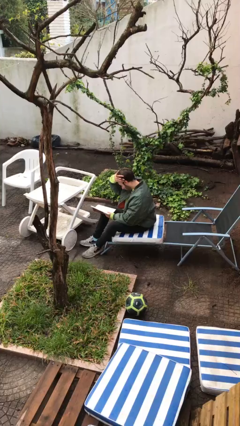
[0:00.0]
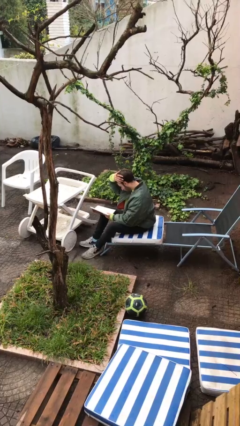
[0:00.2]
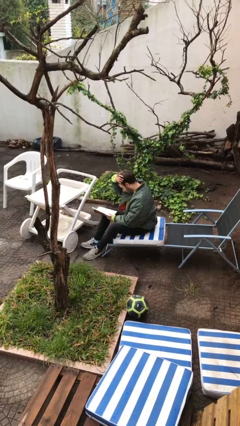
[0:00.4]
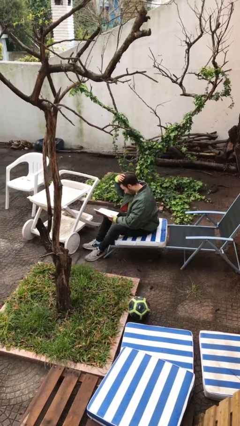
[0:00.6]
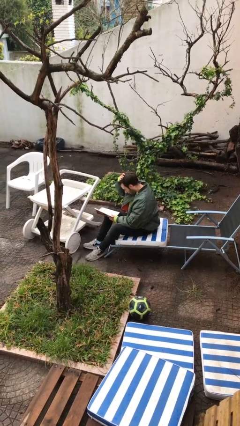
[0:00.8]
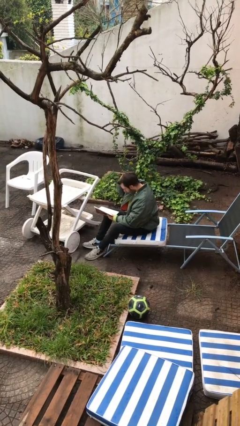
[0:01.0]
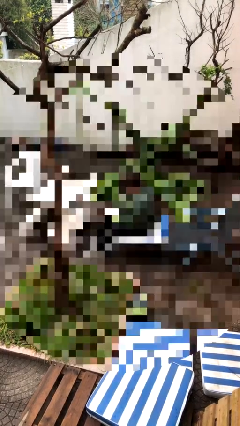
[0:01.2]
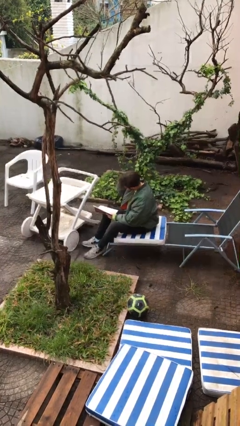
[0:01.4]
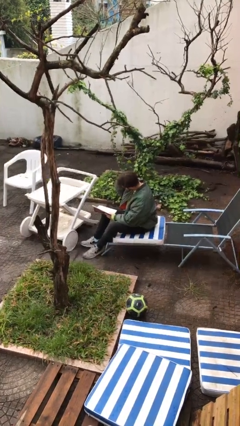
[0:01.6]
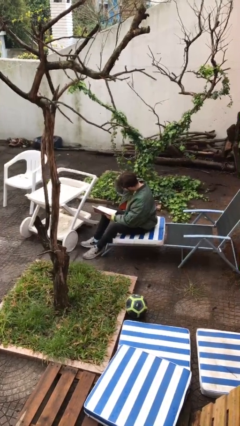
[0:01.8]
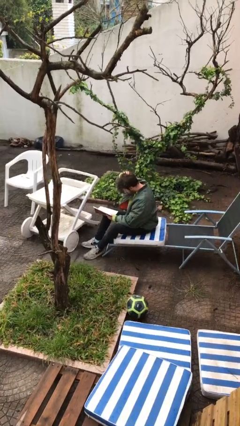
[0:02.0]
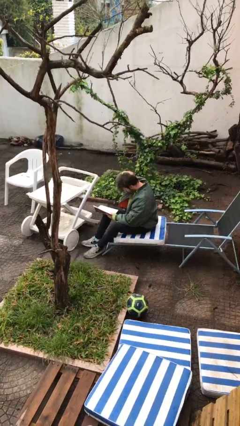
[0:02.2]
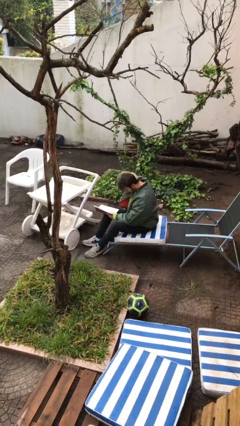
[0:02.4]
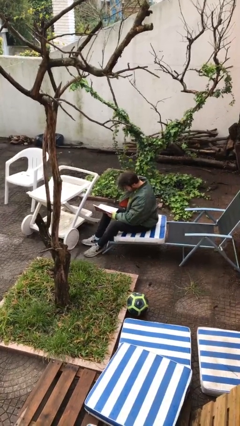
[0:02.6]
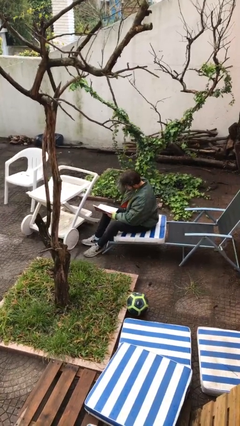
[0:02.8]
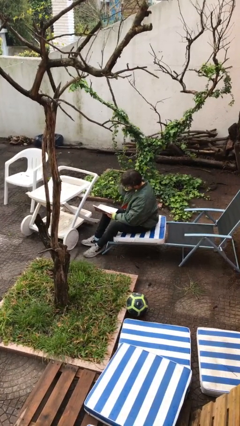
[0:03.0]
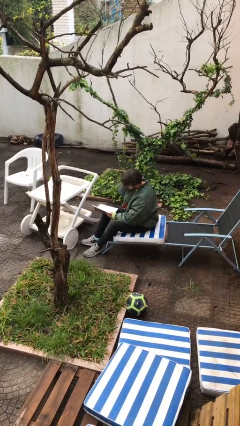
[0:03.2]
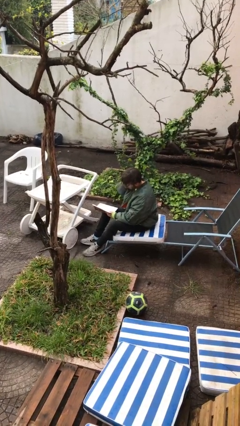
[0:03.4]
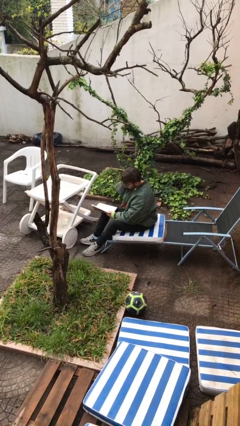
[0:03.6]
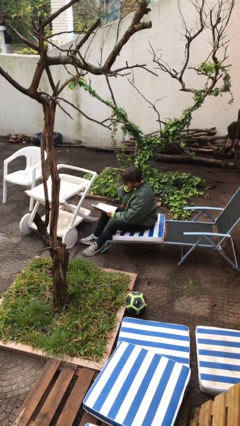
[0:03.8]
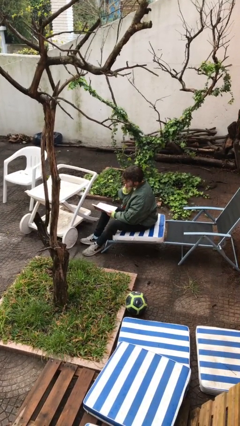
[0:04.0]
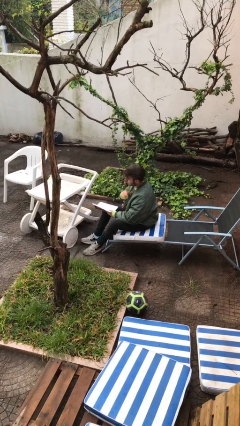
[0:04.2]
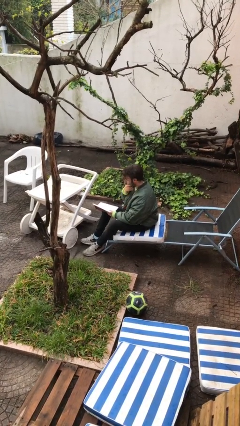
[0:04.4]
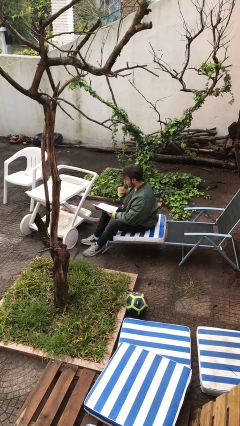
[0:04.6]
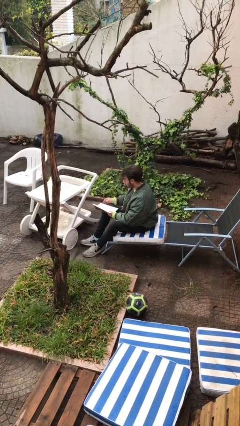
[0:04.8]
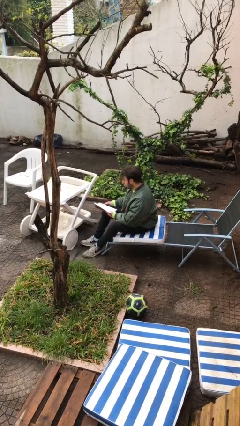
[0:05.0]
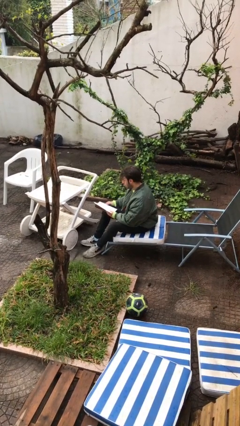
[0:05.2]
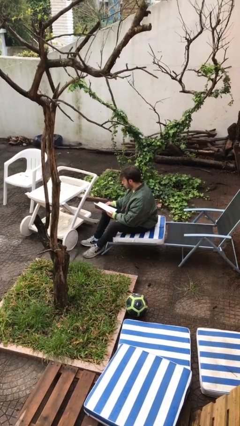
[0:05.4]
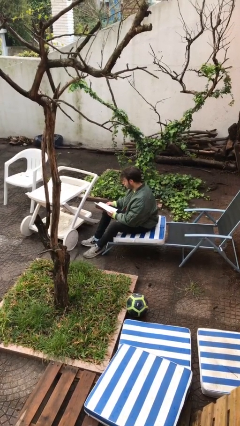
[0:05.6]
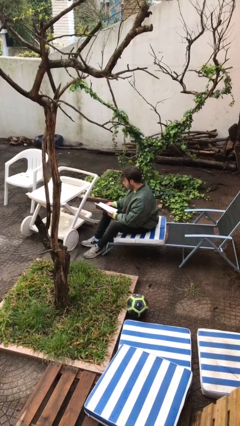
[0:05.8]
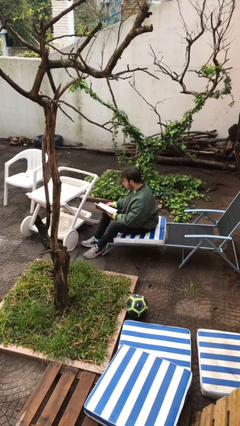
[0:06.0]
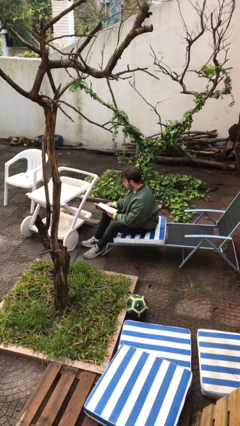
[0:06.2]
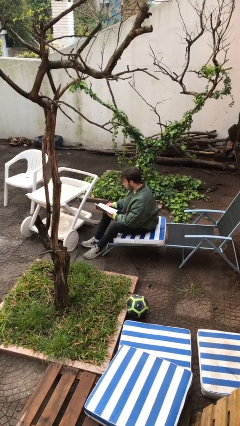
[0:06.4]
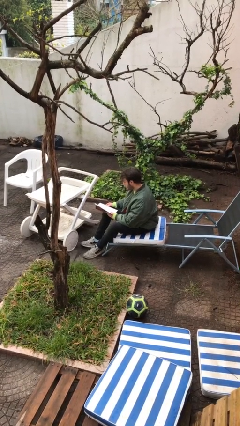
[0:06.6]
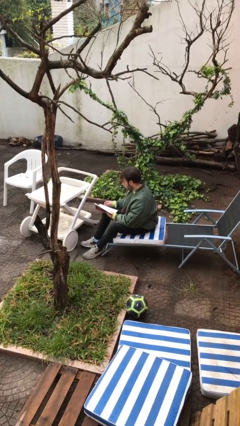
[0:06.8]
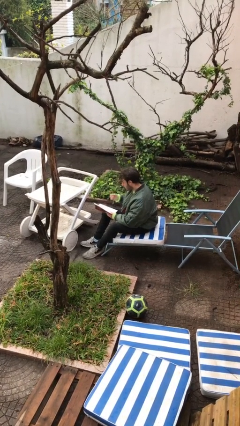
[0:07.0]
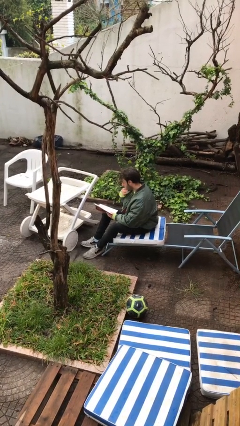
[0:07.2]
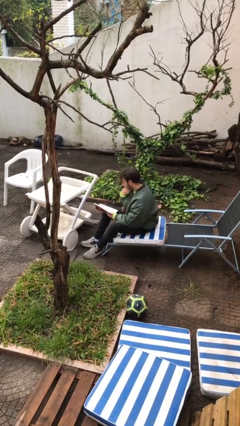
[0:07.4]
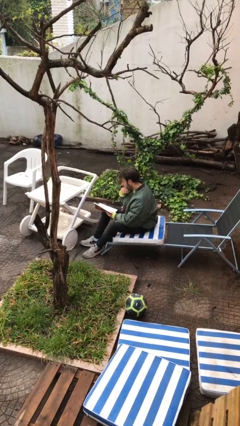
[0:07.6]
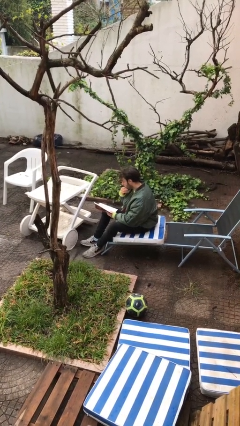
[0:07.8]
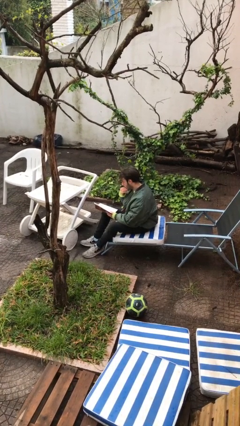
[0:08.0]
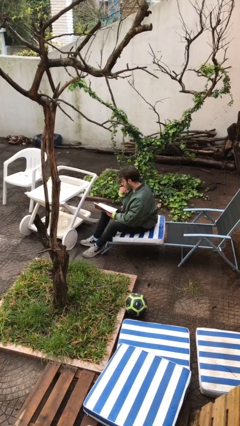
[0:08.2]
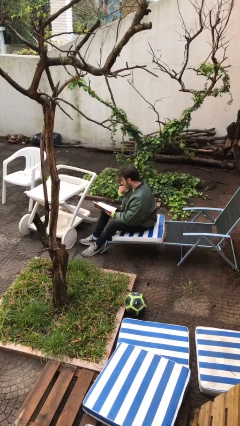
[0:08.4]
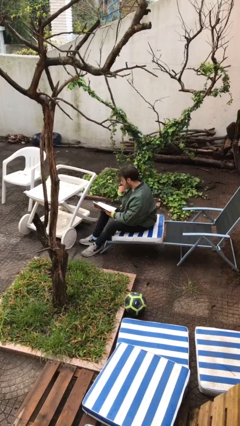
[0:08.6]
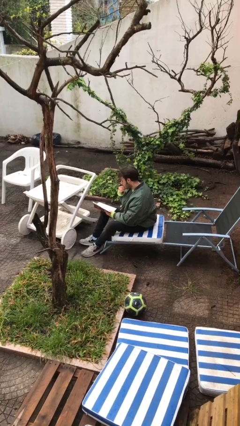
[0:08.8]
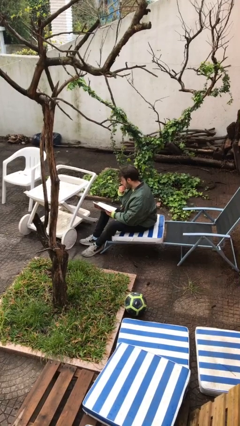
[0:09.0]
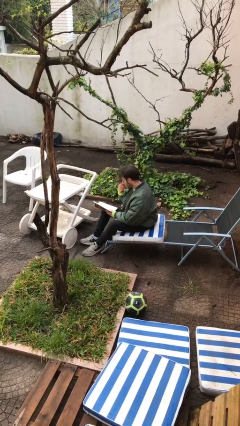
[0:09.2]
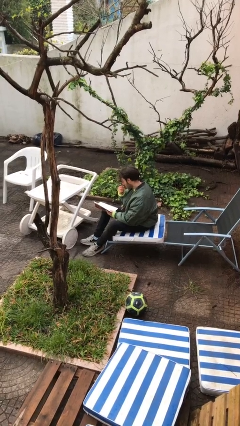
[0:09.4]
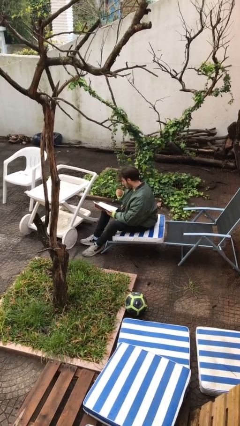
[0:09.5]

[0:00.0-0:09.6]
person reads document

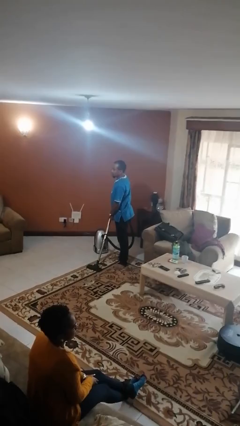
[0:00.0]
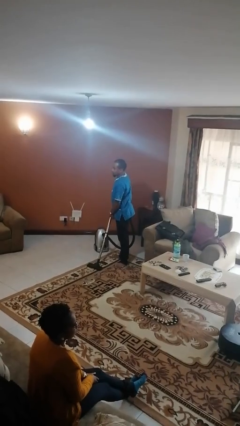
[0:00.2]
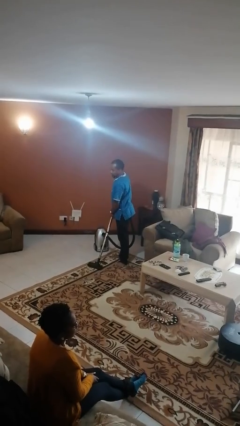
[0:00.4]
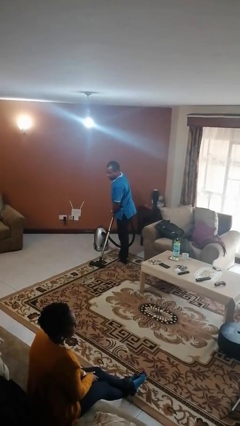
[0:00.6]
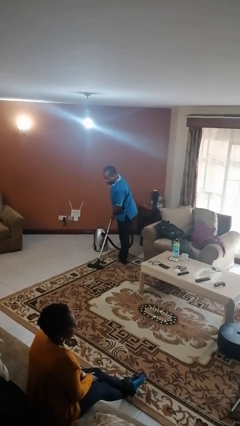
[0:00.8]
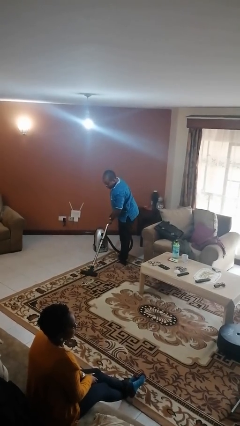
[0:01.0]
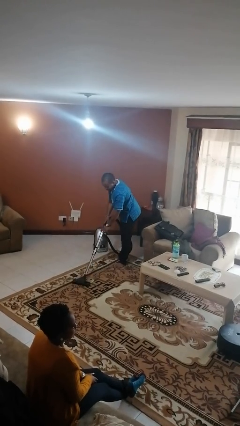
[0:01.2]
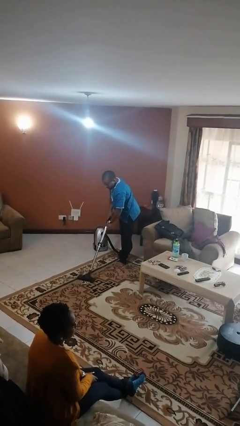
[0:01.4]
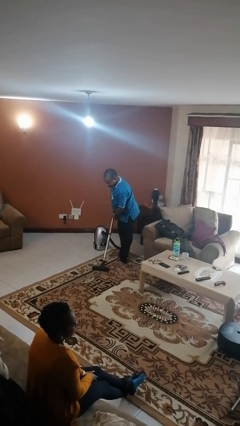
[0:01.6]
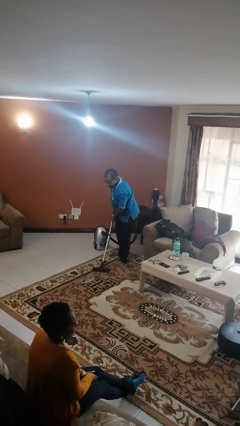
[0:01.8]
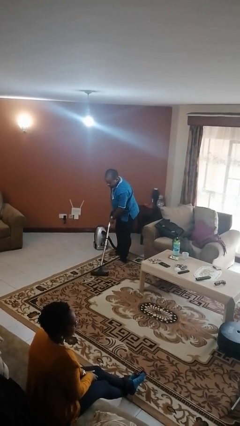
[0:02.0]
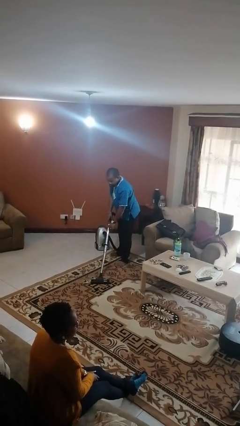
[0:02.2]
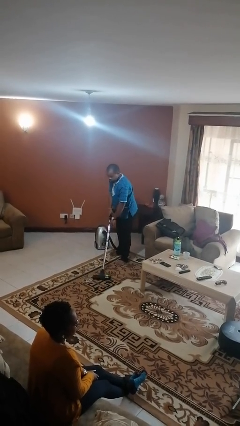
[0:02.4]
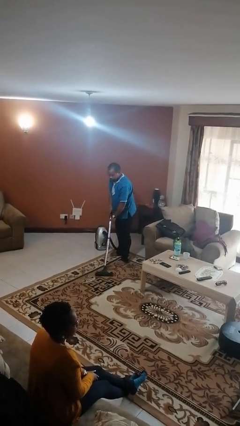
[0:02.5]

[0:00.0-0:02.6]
person vacuums carpet

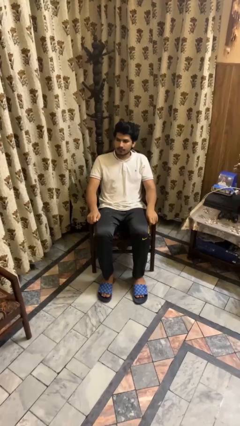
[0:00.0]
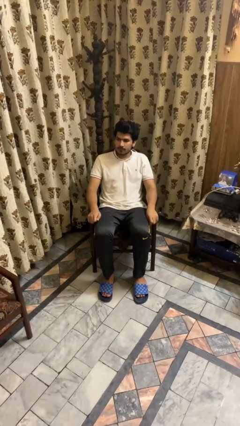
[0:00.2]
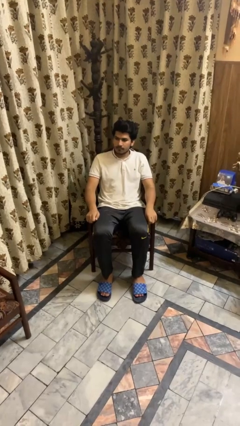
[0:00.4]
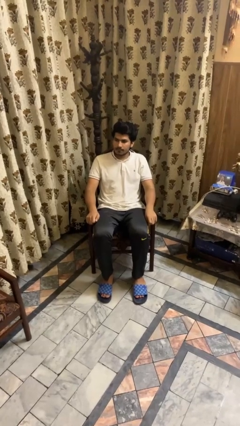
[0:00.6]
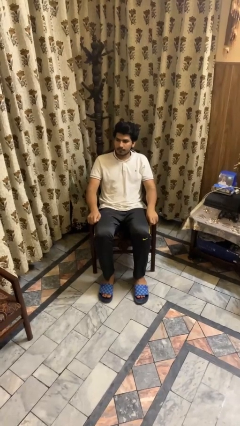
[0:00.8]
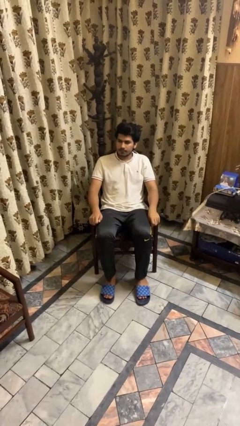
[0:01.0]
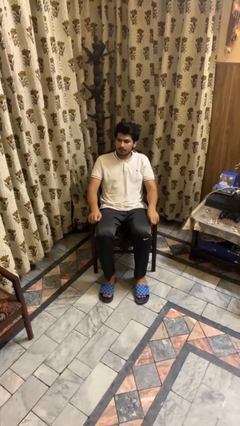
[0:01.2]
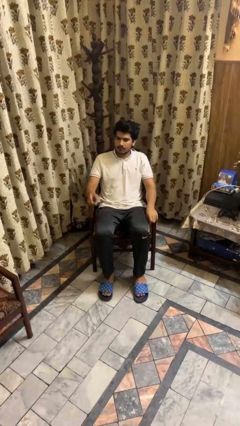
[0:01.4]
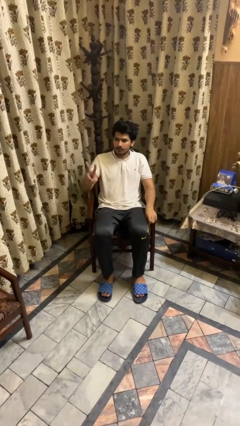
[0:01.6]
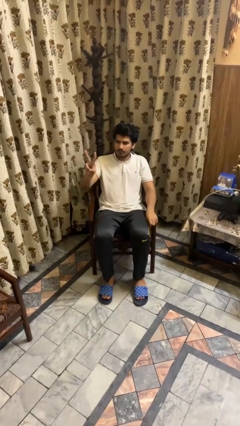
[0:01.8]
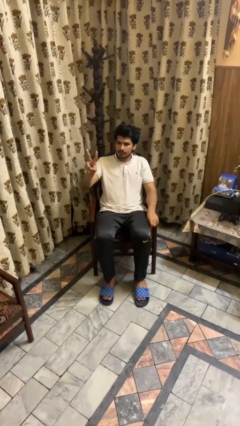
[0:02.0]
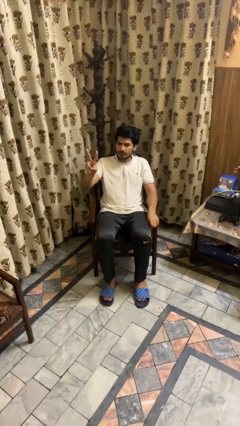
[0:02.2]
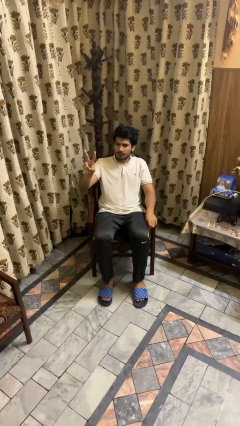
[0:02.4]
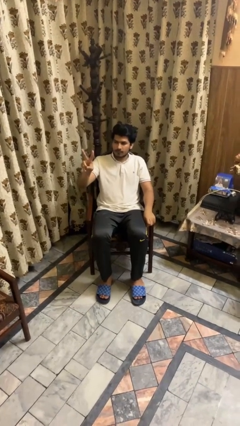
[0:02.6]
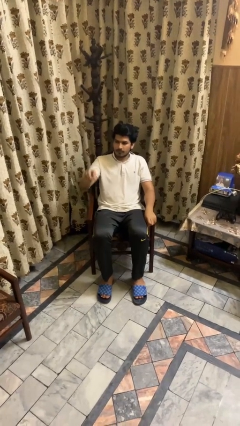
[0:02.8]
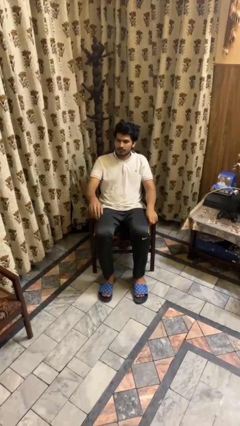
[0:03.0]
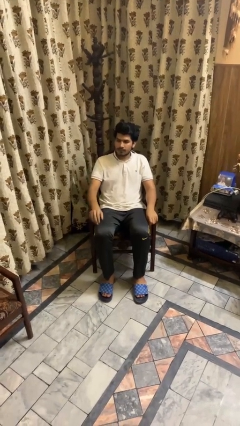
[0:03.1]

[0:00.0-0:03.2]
person gestures peace

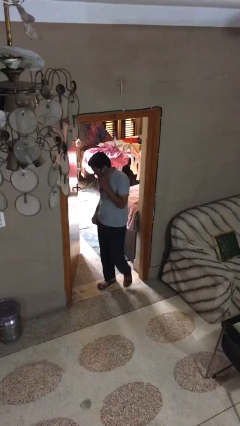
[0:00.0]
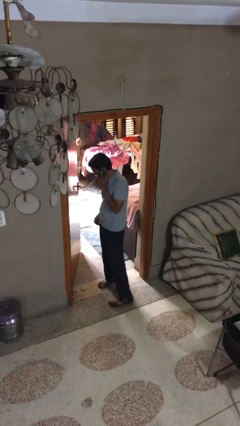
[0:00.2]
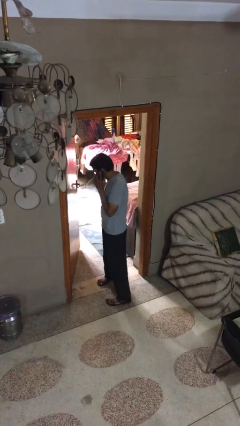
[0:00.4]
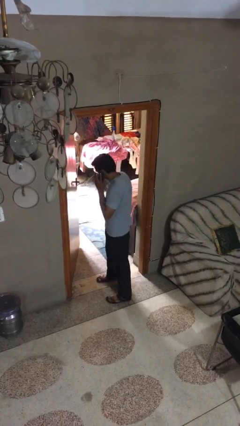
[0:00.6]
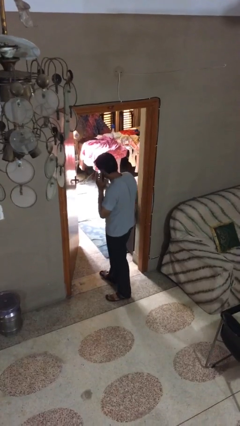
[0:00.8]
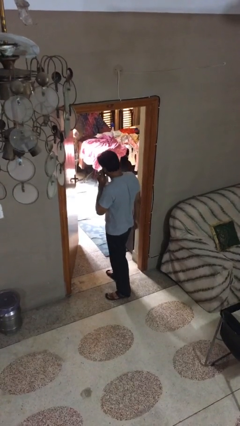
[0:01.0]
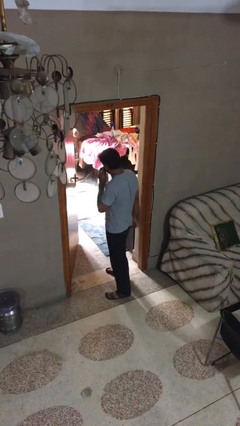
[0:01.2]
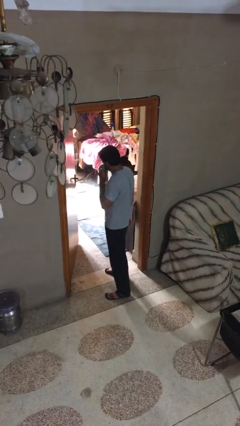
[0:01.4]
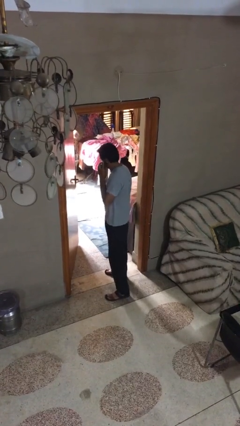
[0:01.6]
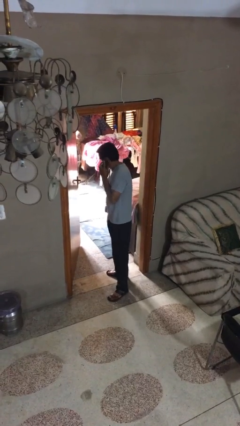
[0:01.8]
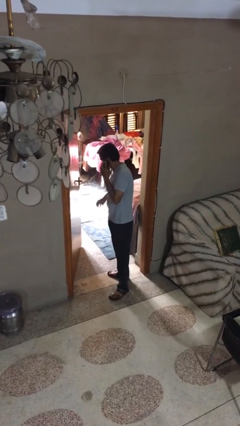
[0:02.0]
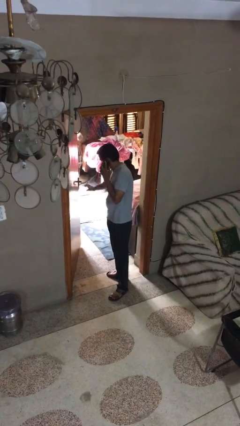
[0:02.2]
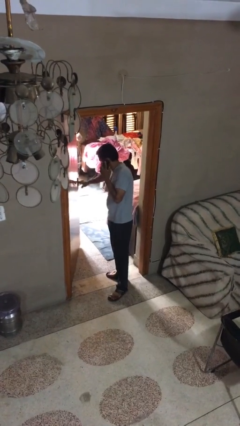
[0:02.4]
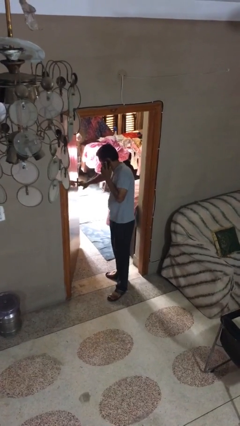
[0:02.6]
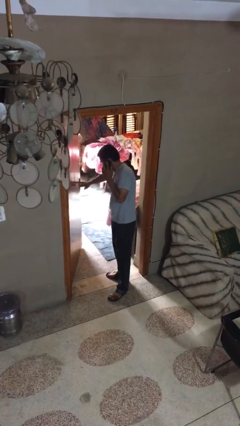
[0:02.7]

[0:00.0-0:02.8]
person enters scene through structure
